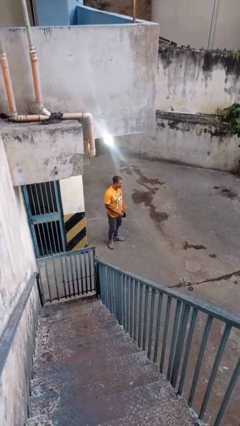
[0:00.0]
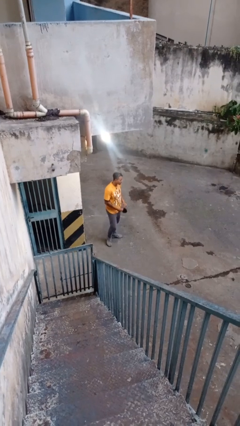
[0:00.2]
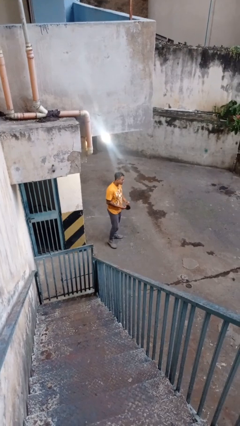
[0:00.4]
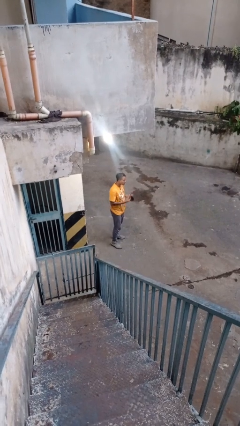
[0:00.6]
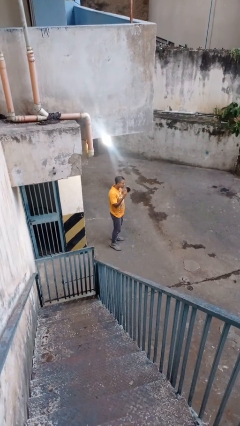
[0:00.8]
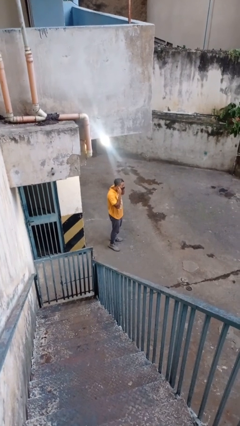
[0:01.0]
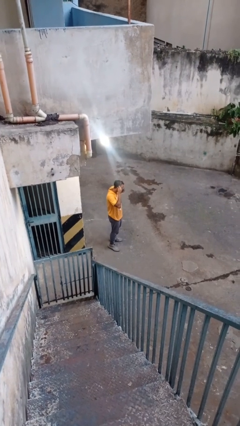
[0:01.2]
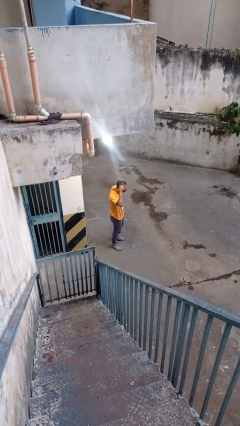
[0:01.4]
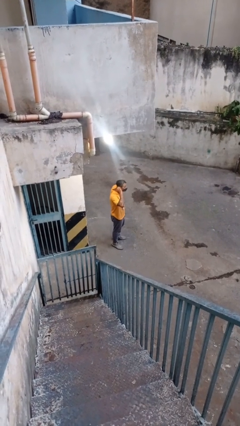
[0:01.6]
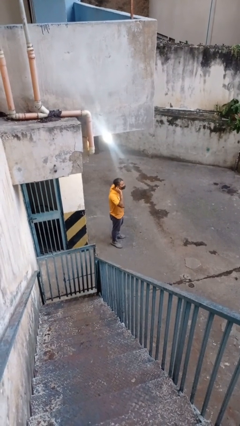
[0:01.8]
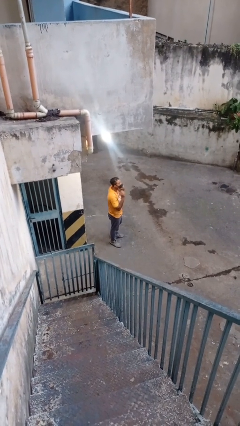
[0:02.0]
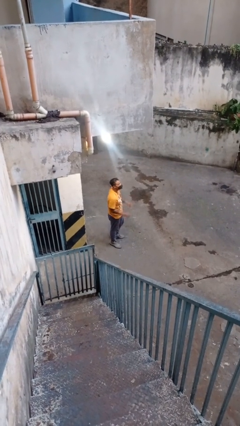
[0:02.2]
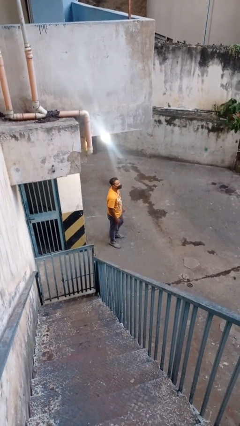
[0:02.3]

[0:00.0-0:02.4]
person puts on facemask

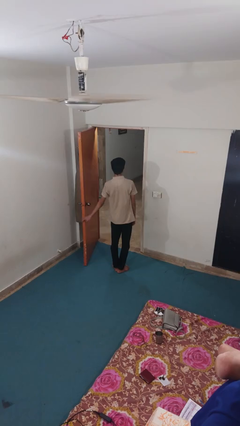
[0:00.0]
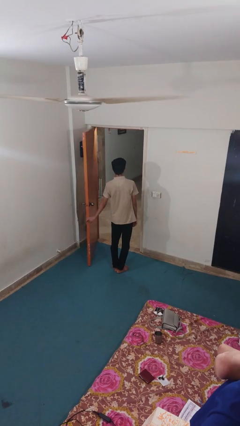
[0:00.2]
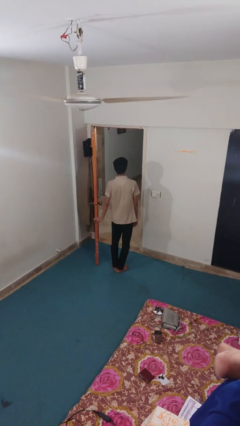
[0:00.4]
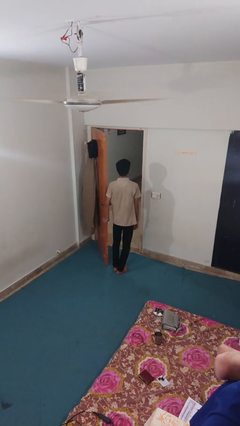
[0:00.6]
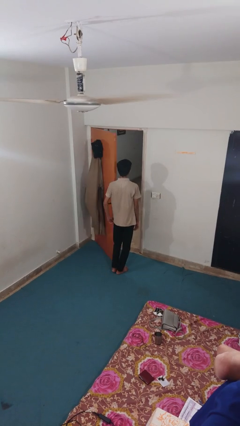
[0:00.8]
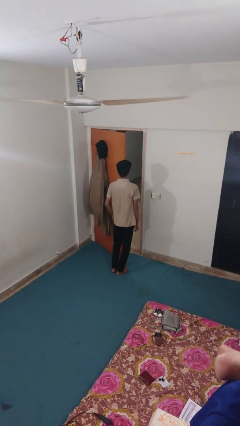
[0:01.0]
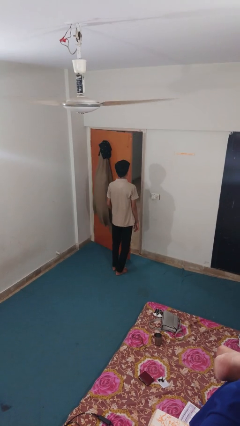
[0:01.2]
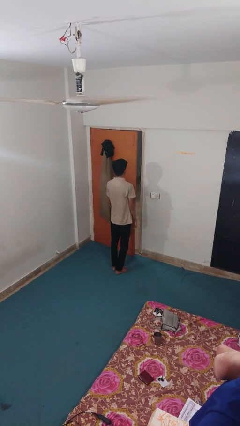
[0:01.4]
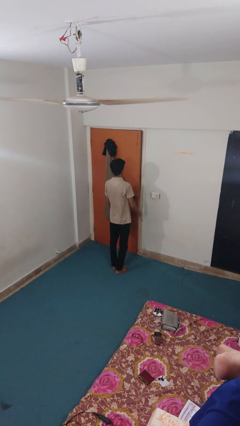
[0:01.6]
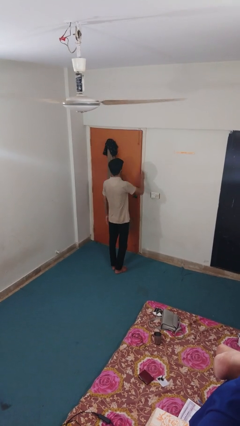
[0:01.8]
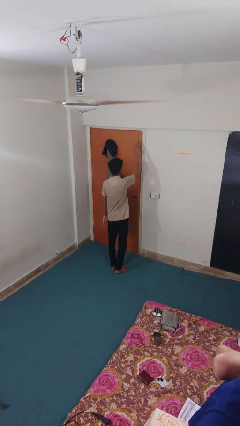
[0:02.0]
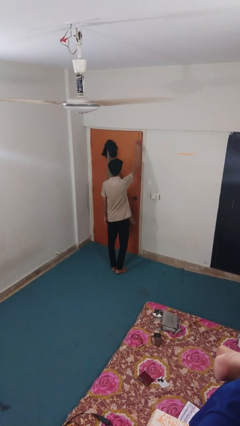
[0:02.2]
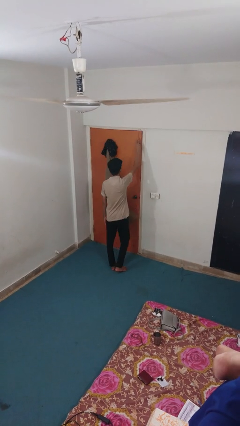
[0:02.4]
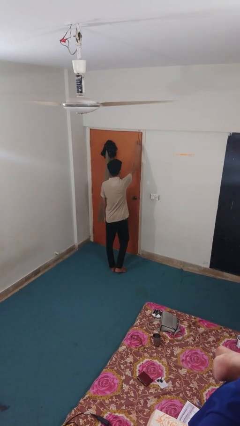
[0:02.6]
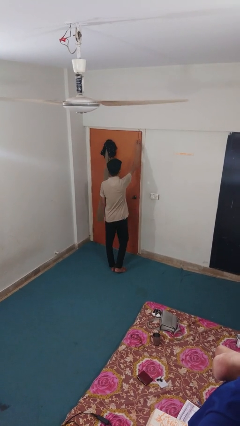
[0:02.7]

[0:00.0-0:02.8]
person closes facility door

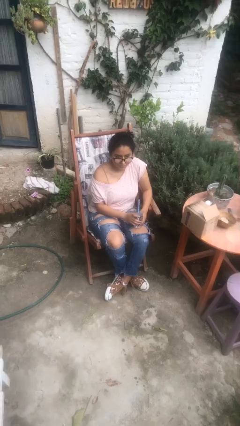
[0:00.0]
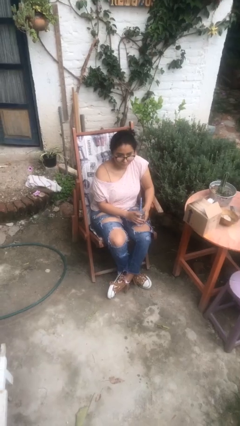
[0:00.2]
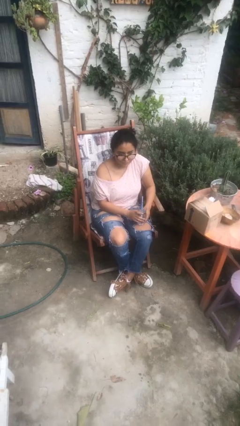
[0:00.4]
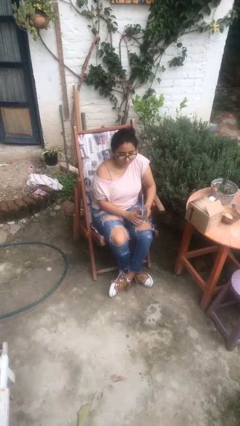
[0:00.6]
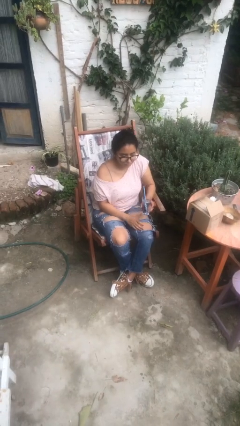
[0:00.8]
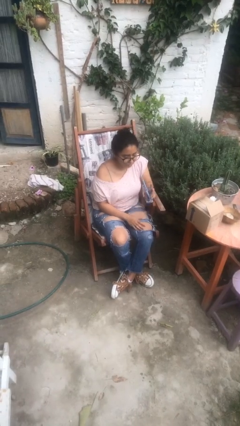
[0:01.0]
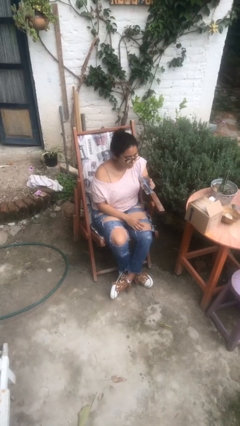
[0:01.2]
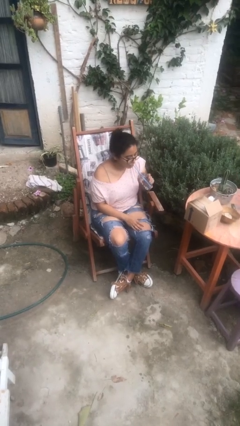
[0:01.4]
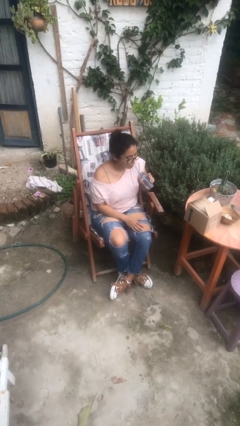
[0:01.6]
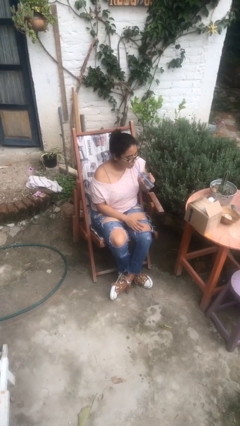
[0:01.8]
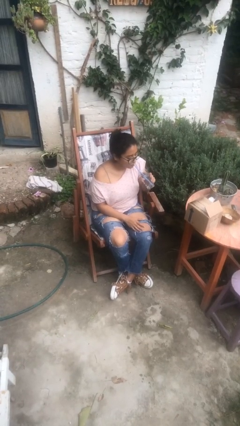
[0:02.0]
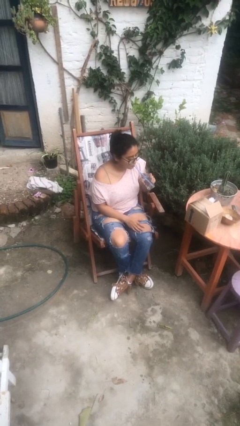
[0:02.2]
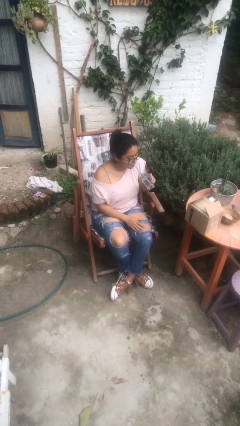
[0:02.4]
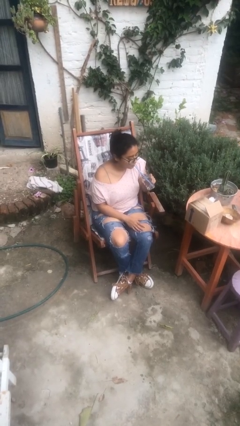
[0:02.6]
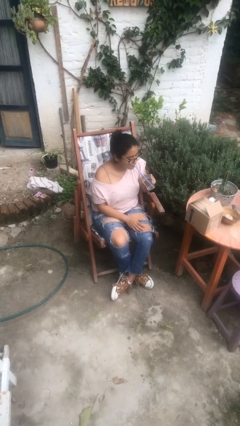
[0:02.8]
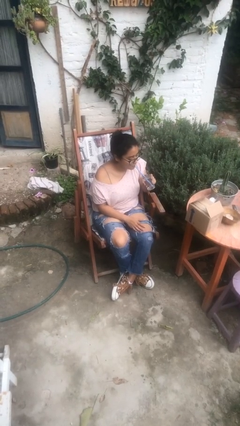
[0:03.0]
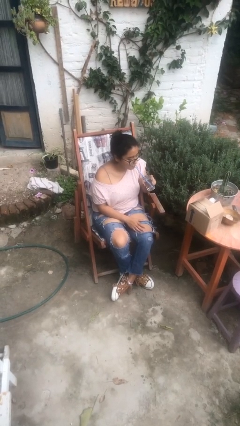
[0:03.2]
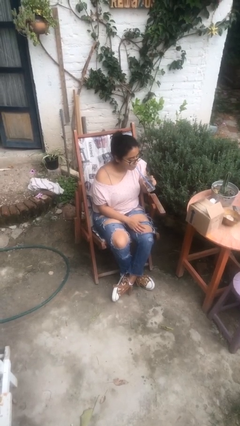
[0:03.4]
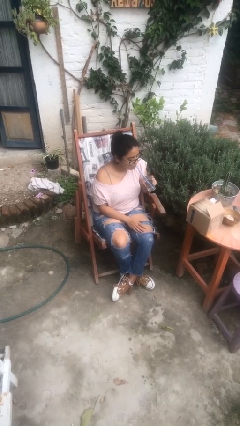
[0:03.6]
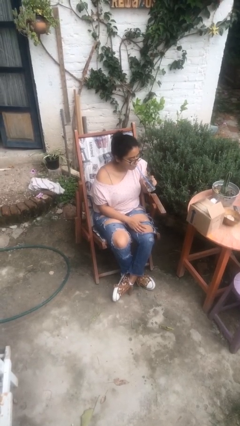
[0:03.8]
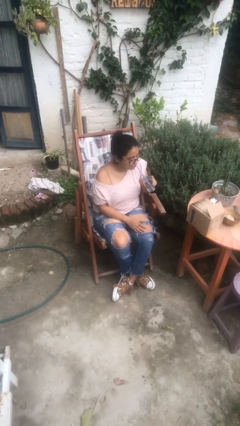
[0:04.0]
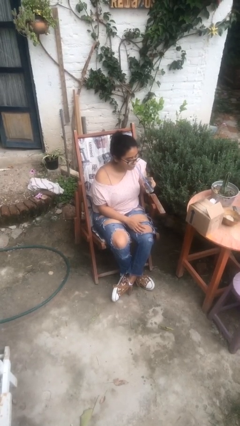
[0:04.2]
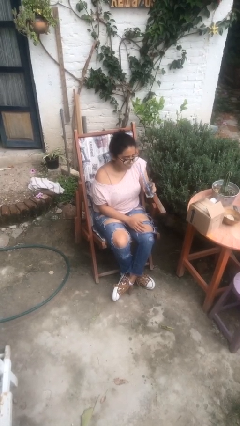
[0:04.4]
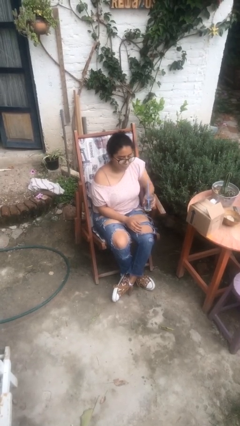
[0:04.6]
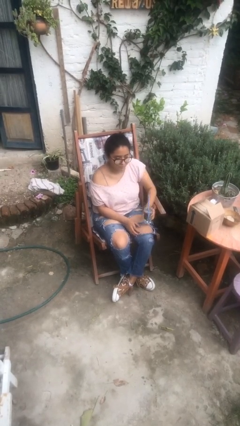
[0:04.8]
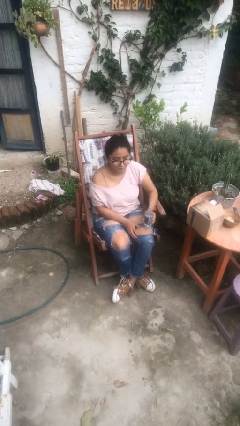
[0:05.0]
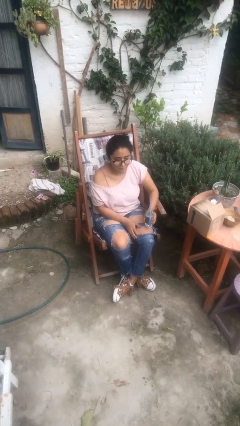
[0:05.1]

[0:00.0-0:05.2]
person drinks from straw

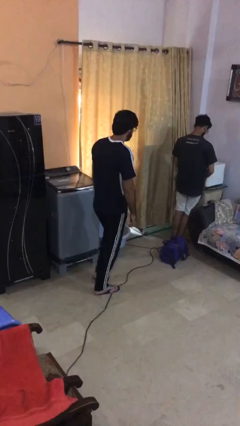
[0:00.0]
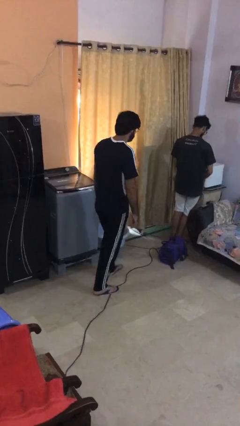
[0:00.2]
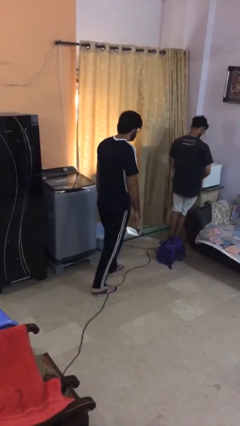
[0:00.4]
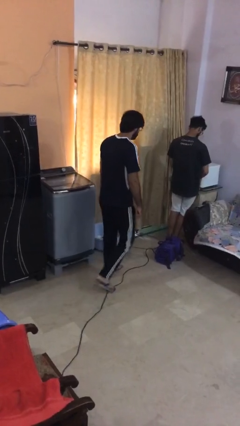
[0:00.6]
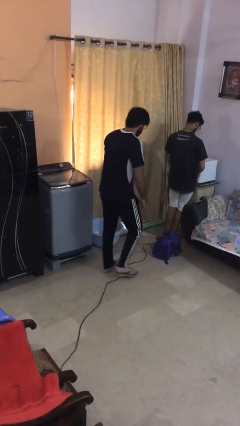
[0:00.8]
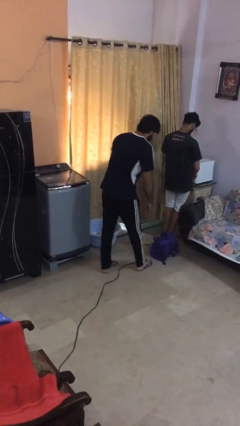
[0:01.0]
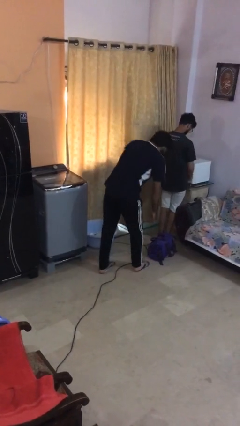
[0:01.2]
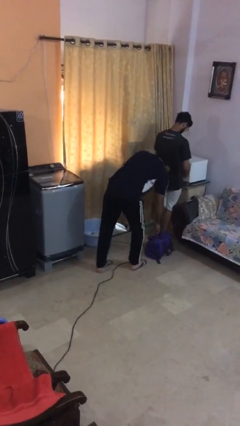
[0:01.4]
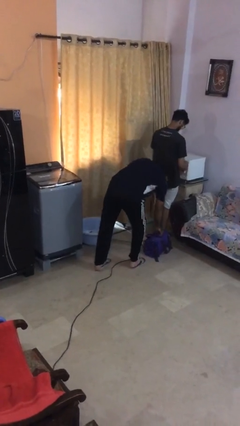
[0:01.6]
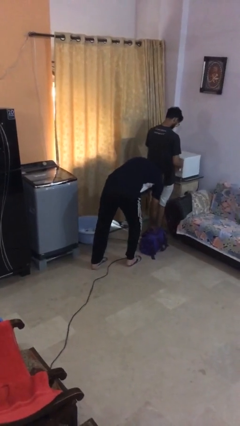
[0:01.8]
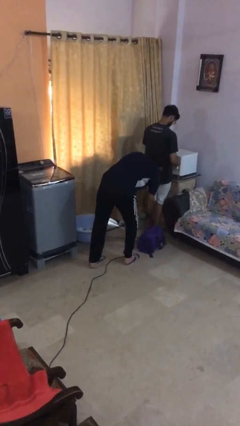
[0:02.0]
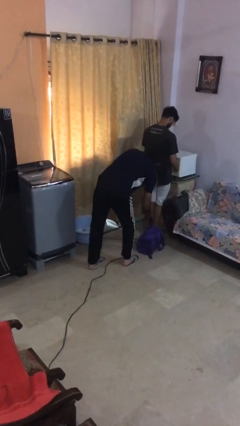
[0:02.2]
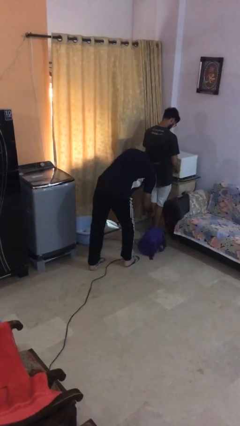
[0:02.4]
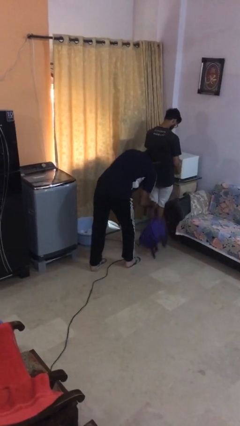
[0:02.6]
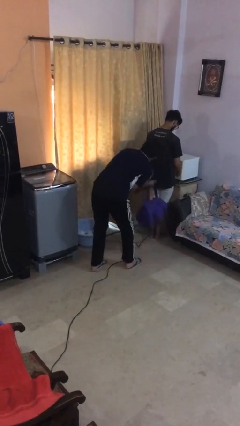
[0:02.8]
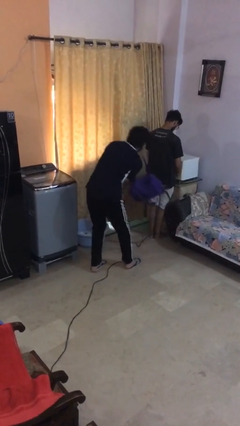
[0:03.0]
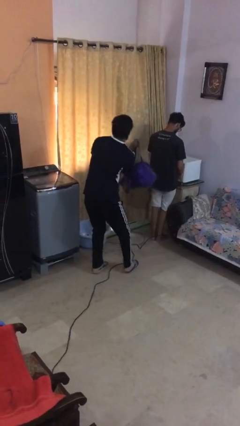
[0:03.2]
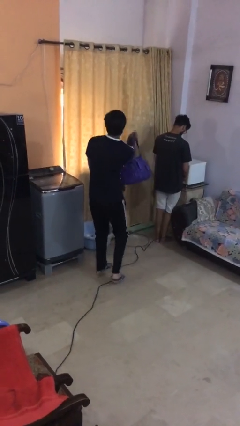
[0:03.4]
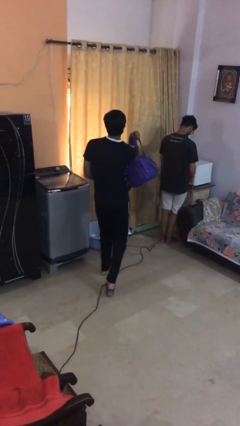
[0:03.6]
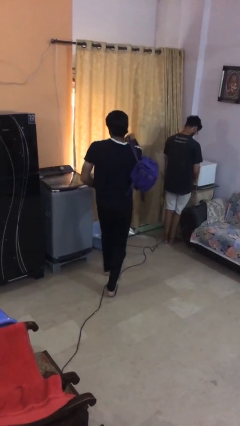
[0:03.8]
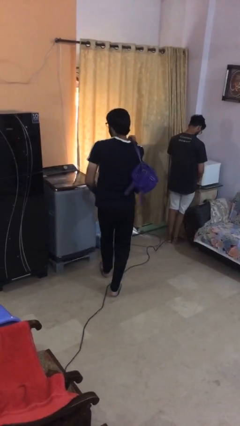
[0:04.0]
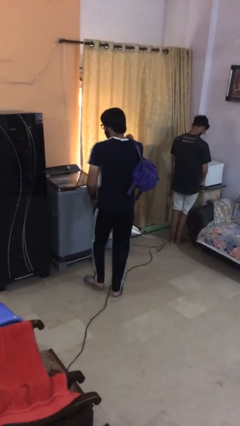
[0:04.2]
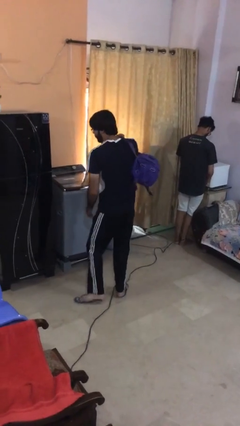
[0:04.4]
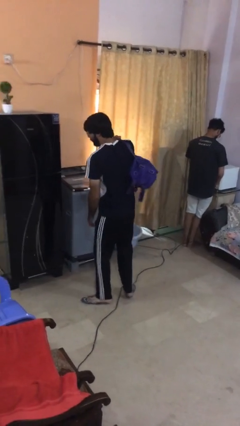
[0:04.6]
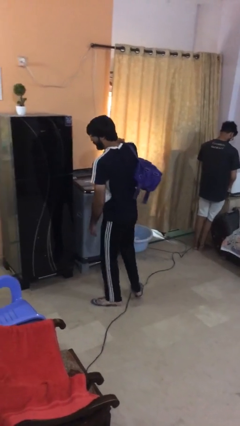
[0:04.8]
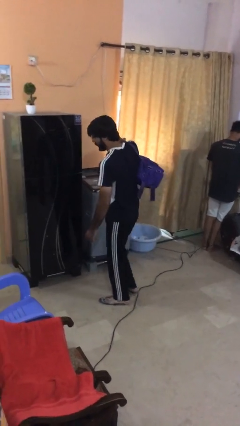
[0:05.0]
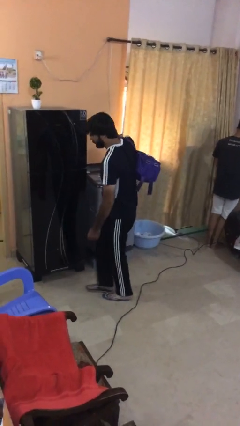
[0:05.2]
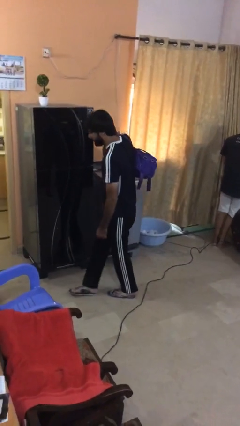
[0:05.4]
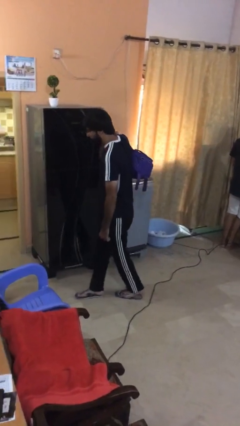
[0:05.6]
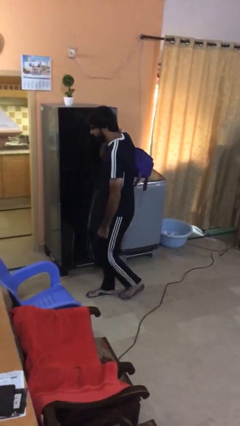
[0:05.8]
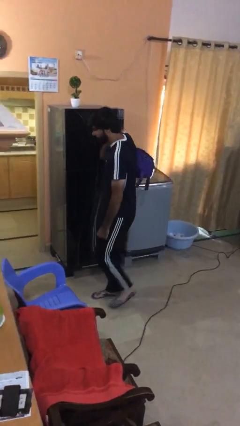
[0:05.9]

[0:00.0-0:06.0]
person steals object from person

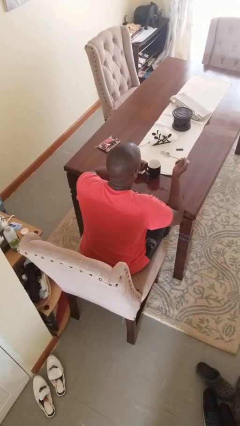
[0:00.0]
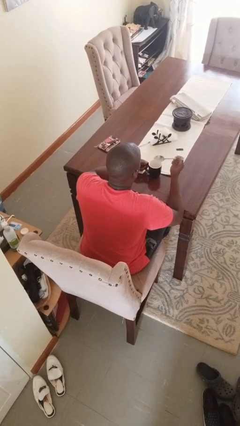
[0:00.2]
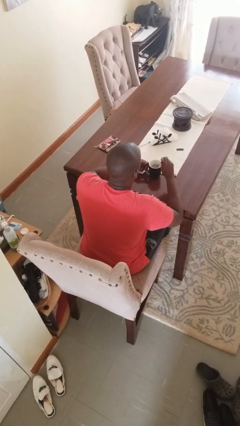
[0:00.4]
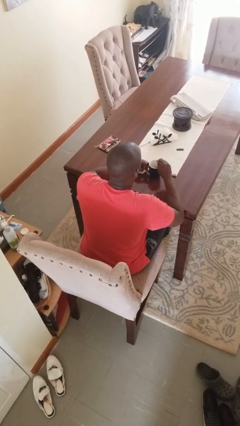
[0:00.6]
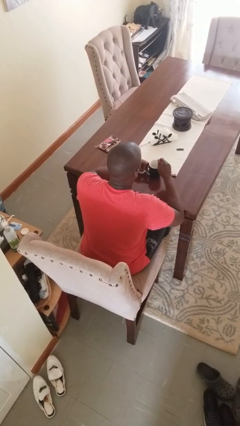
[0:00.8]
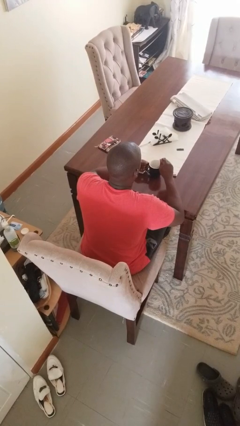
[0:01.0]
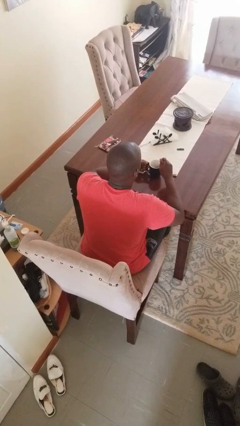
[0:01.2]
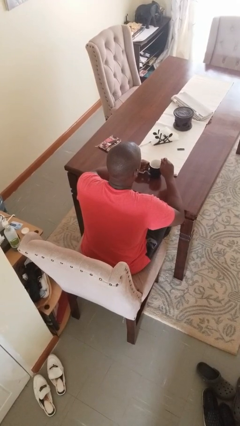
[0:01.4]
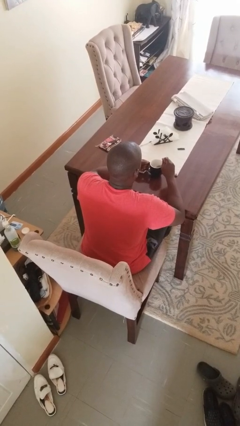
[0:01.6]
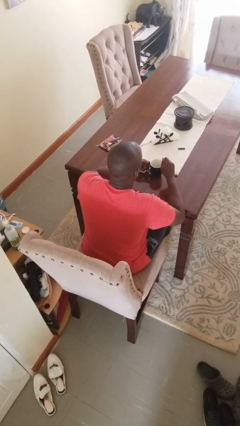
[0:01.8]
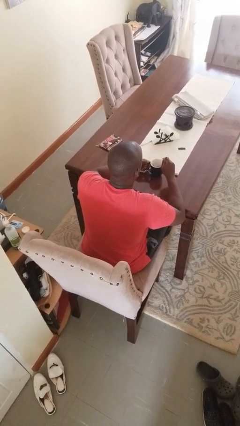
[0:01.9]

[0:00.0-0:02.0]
person stirs mug
